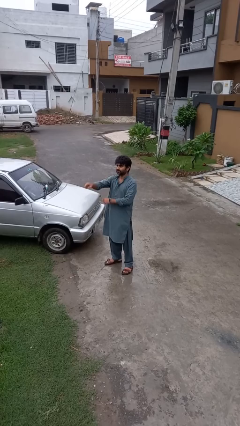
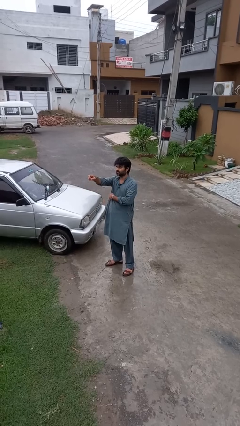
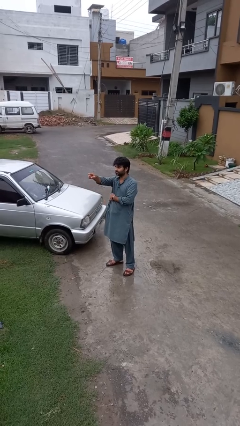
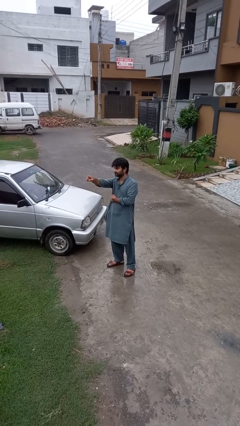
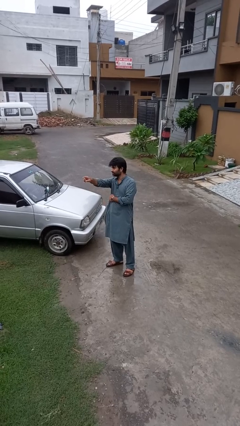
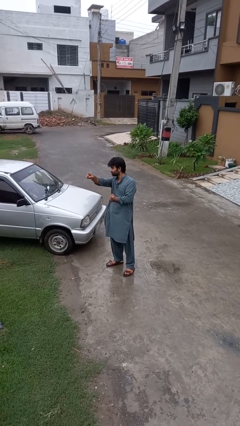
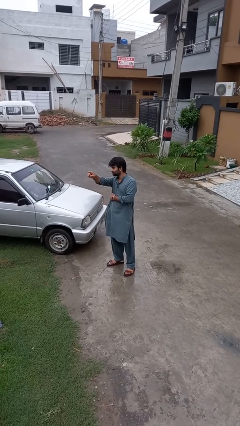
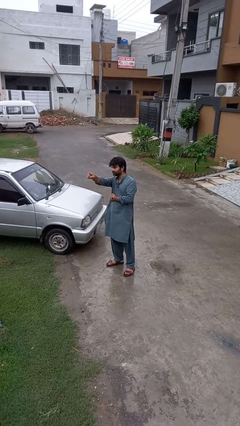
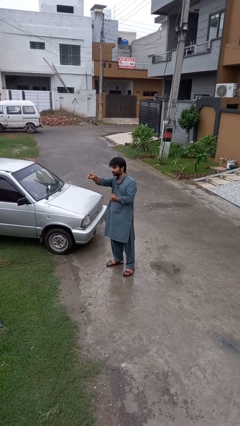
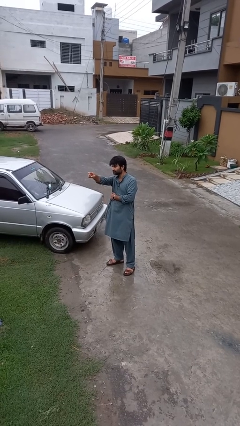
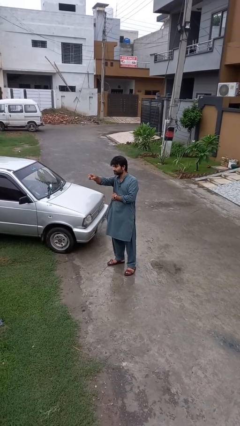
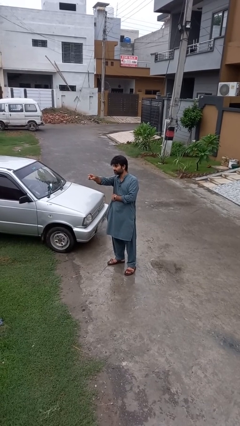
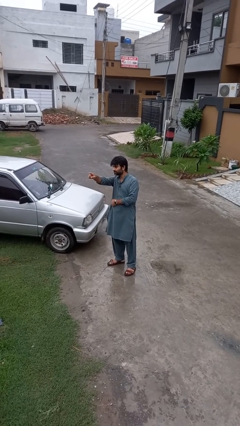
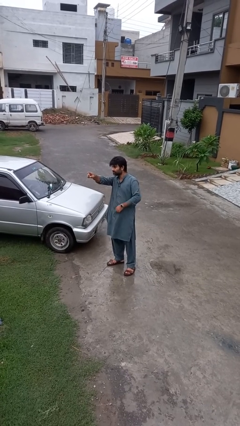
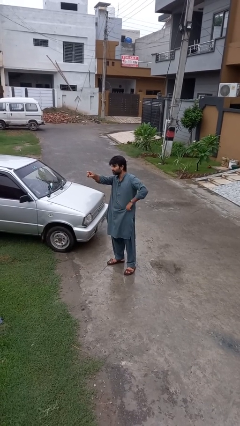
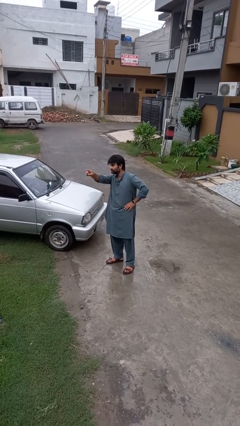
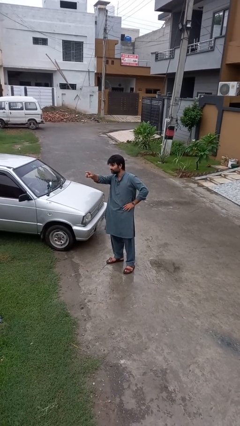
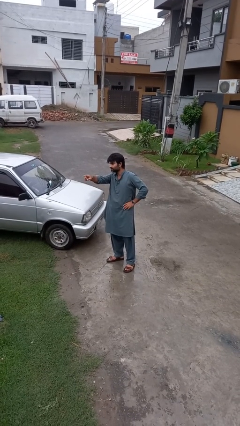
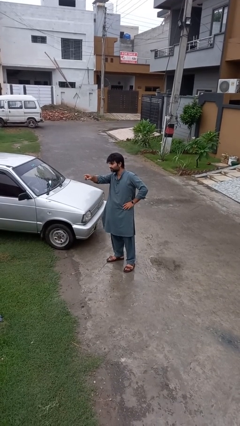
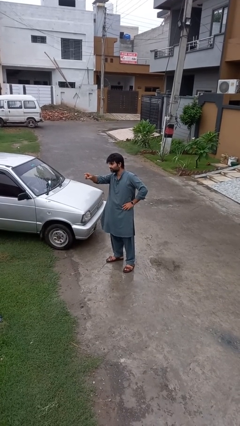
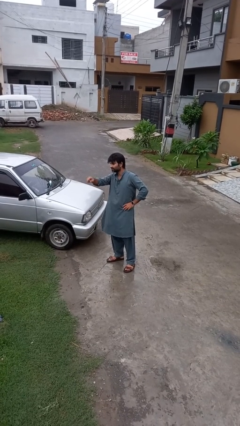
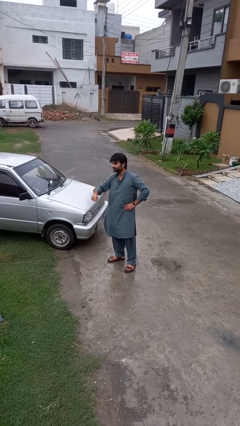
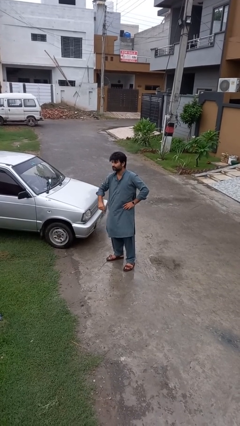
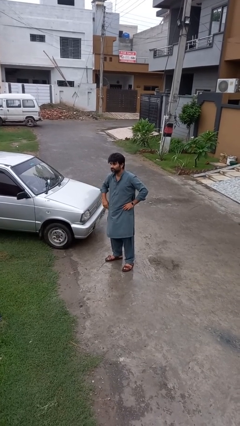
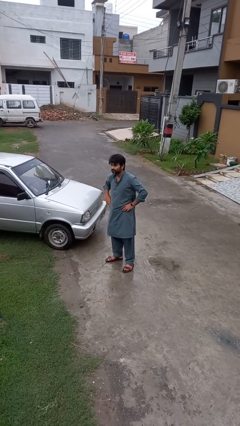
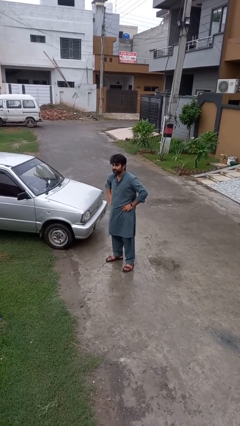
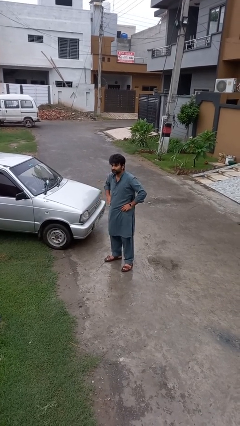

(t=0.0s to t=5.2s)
person points at person

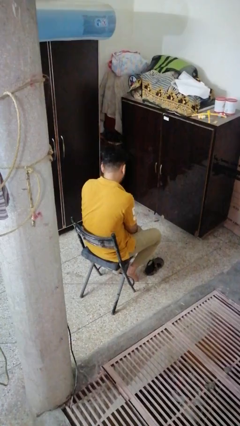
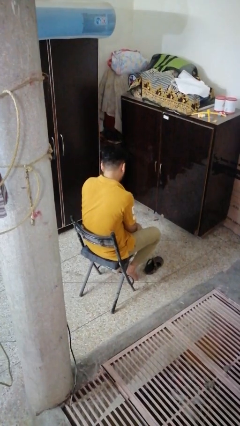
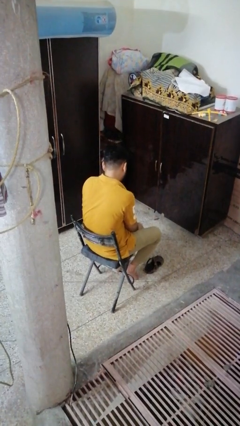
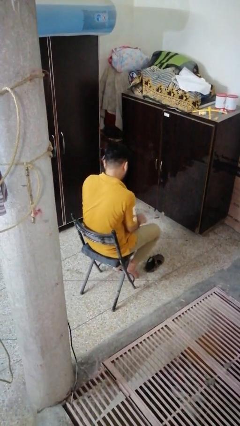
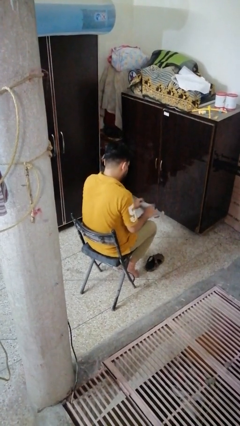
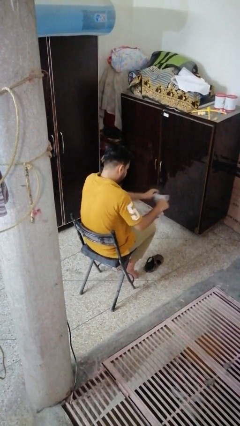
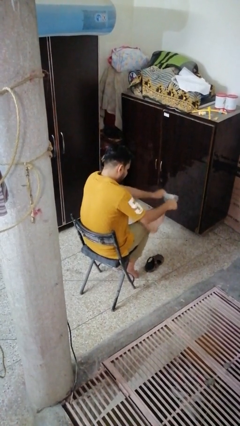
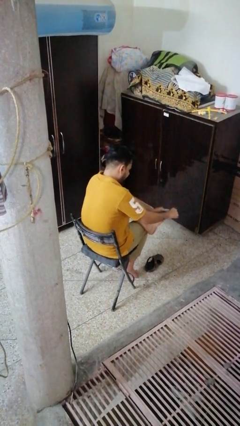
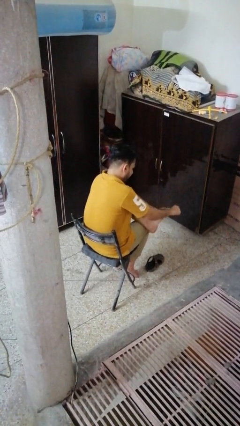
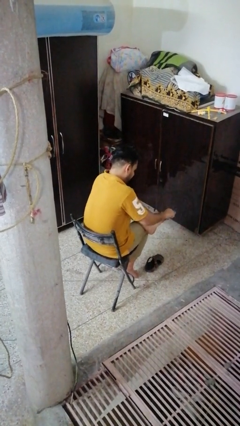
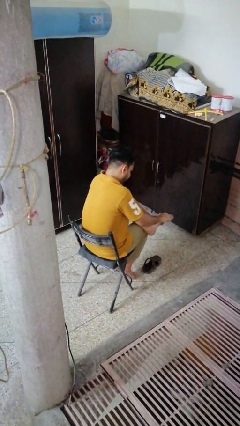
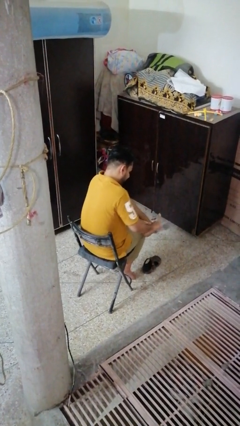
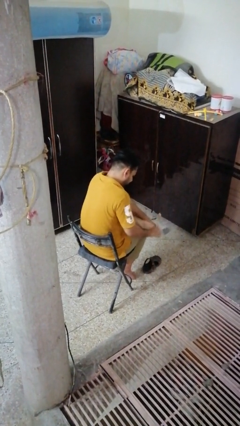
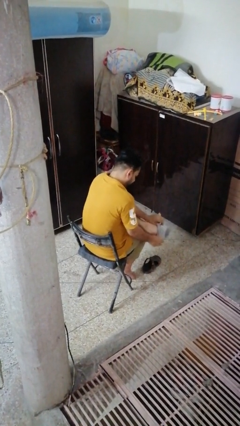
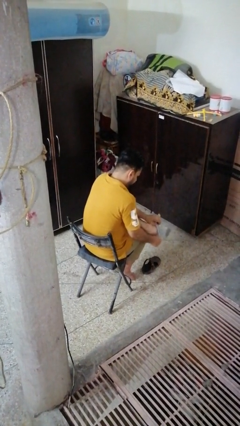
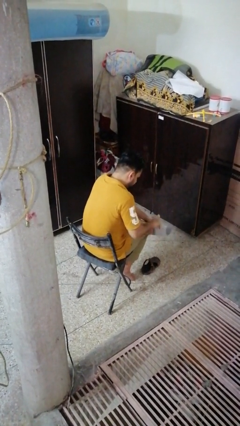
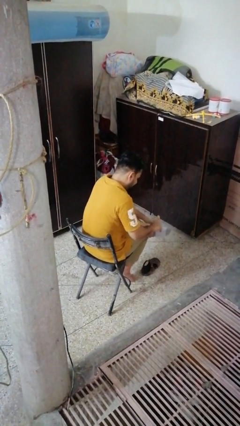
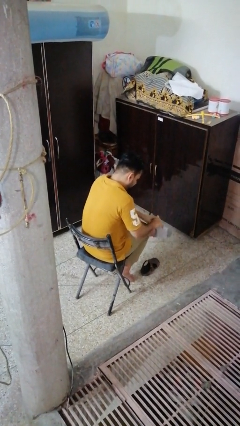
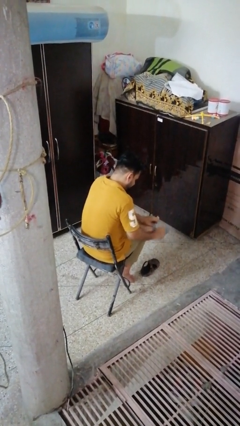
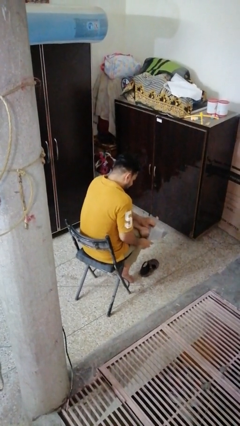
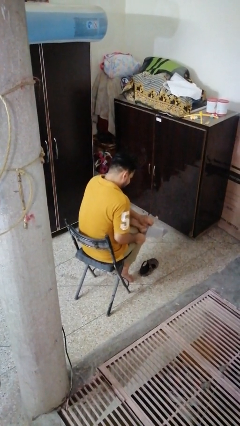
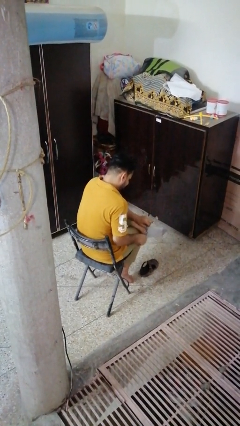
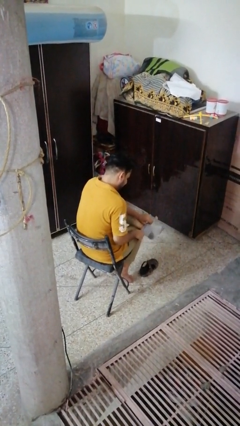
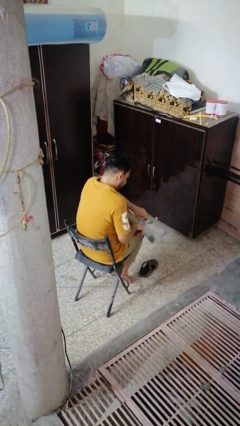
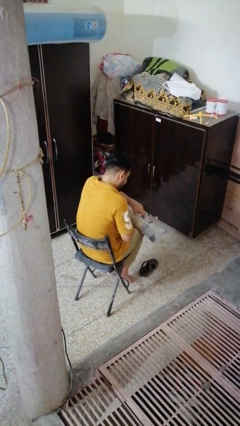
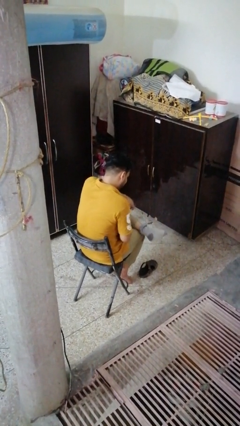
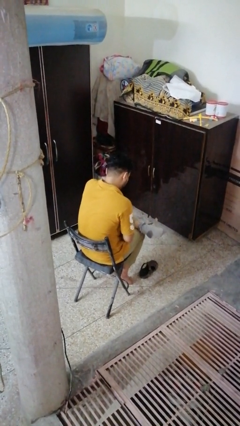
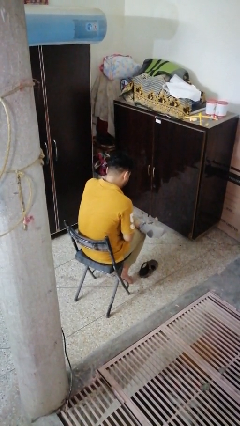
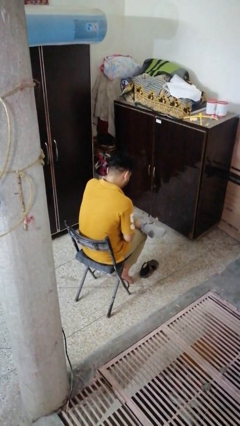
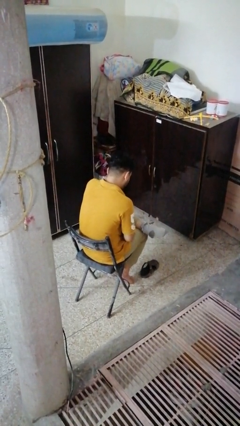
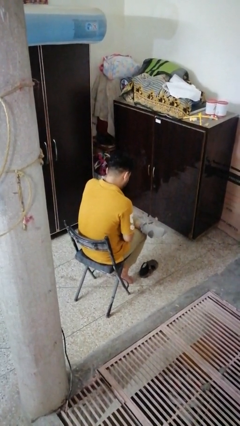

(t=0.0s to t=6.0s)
person puts on socks

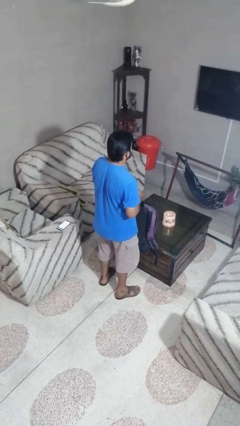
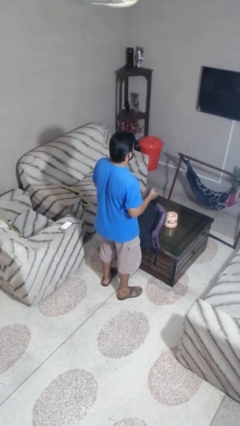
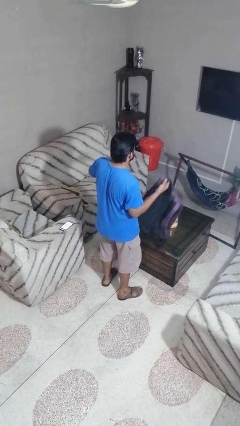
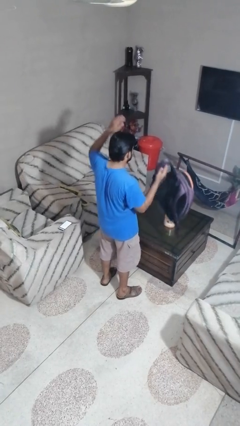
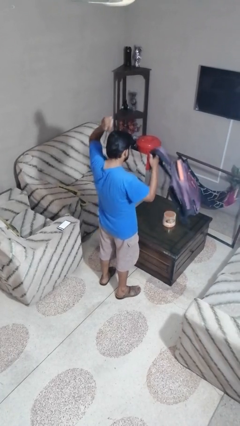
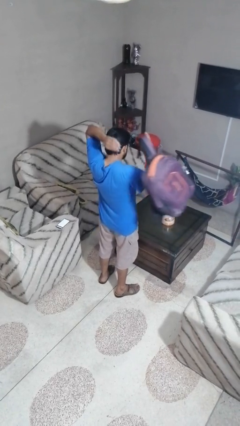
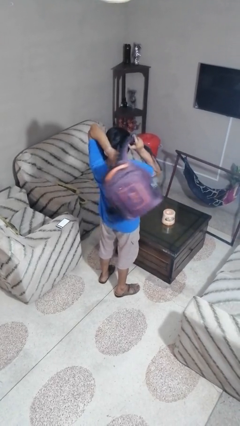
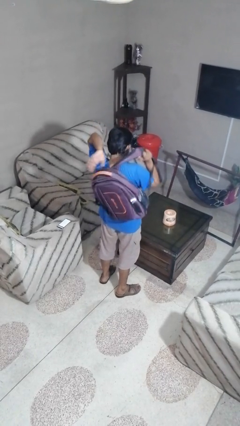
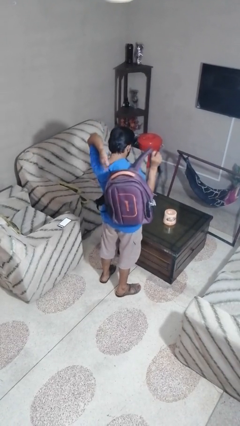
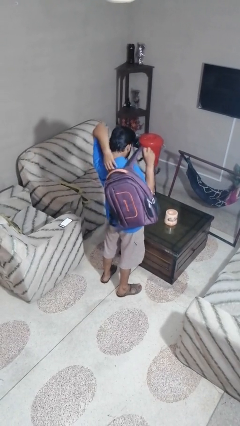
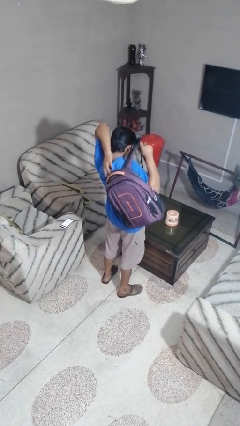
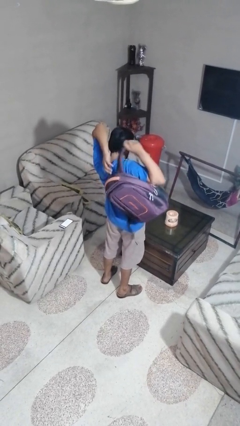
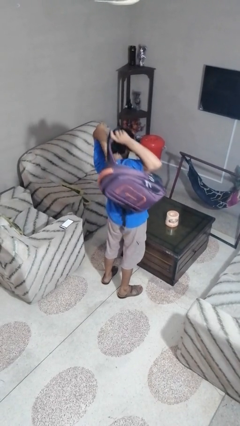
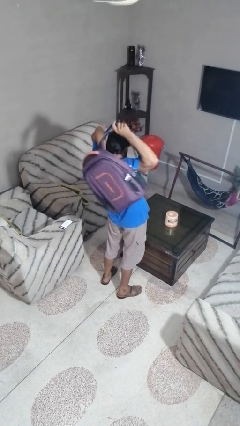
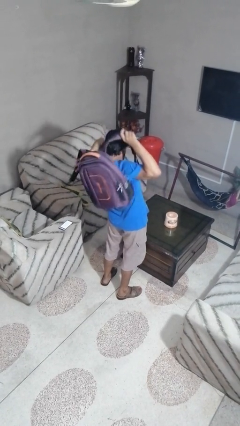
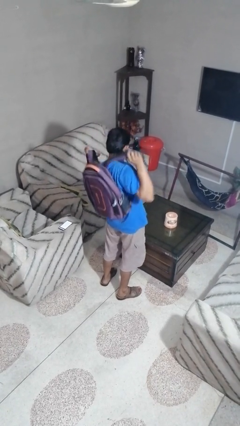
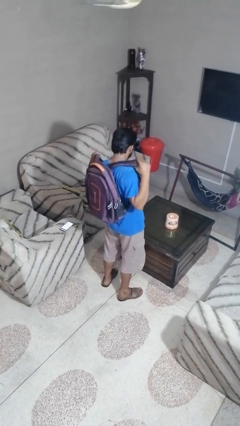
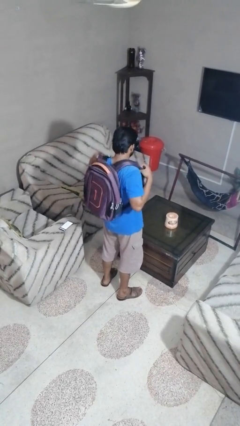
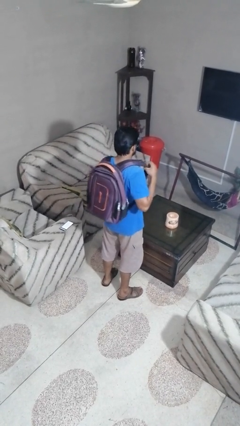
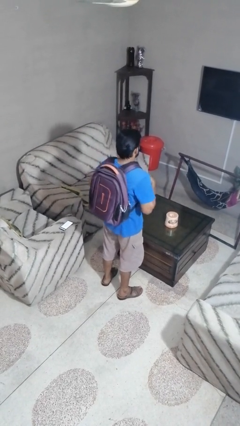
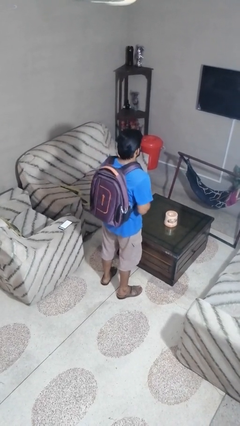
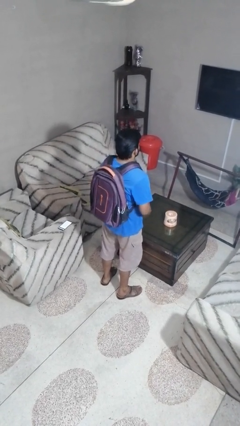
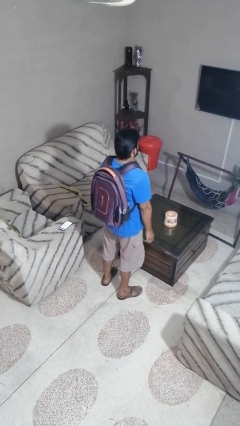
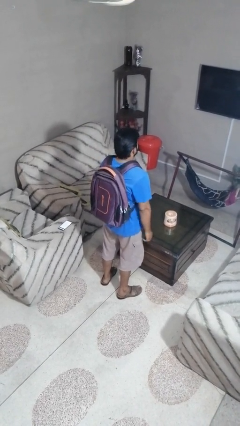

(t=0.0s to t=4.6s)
person puts on backpack

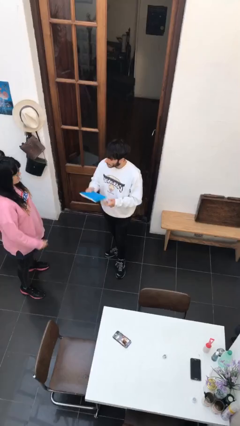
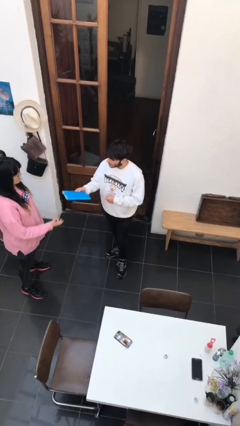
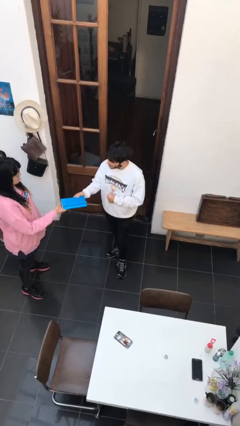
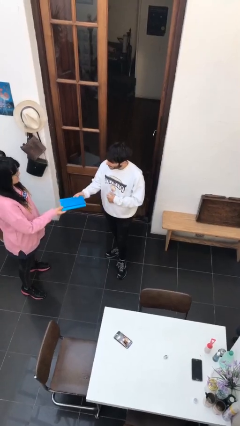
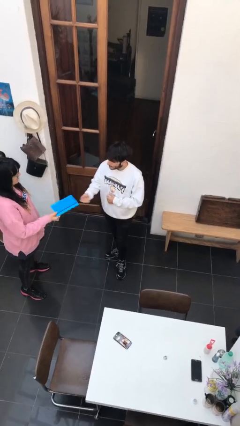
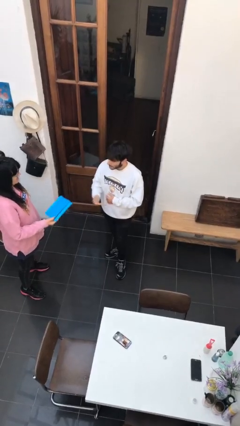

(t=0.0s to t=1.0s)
person transfers object to person

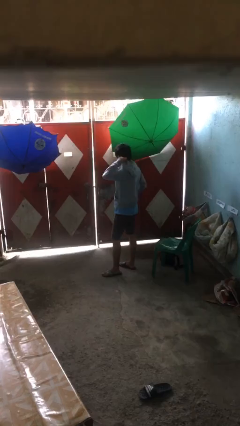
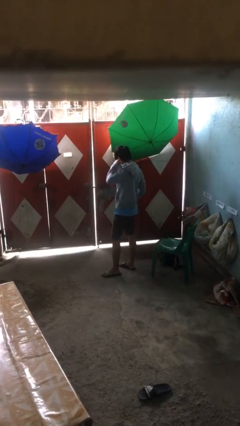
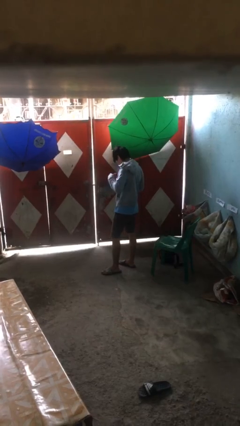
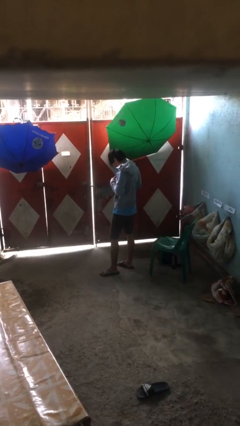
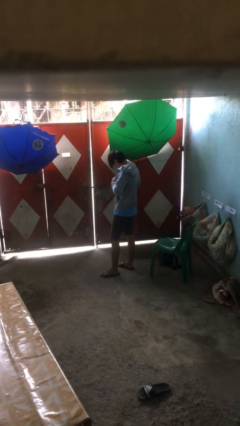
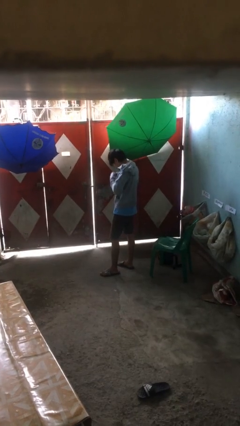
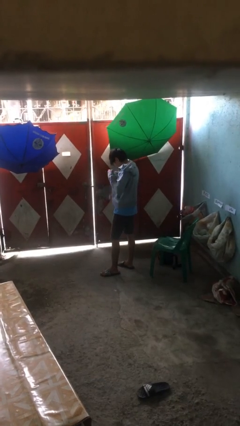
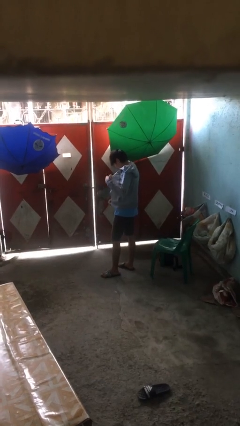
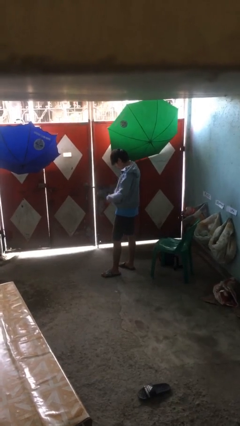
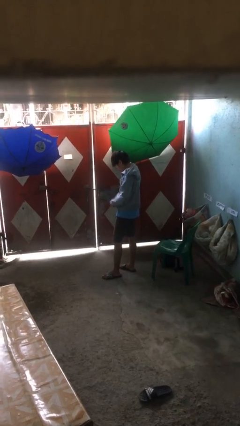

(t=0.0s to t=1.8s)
person unzips jacket
